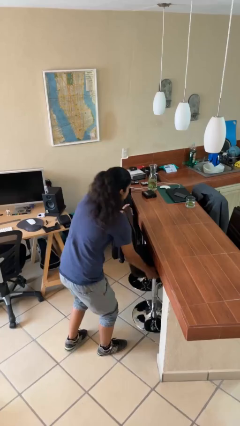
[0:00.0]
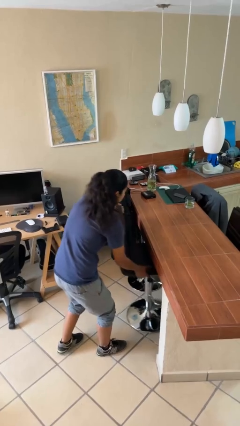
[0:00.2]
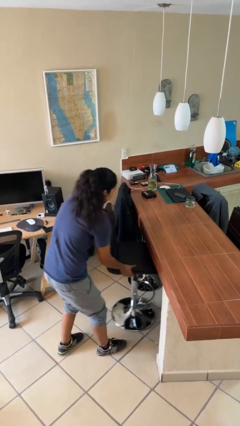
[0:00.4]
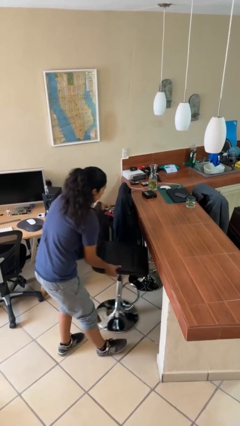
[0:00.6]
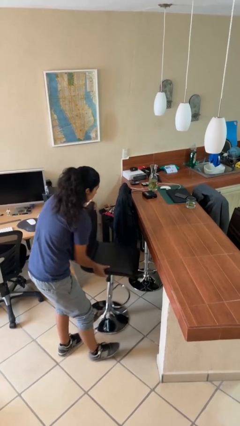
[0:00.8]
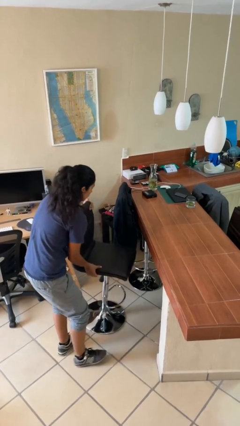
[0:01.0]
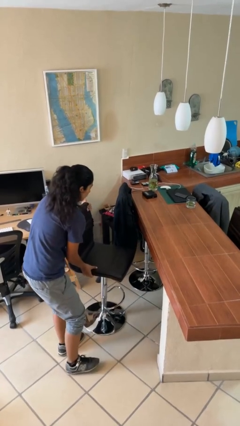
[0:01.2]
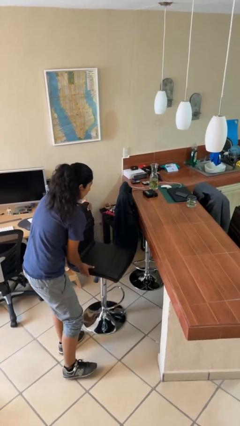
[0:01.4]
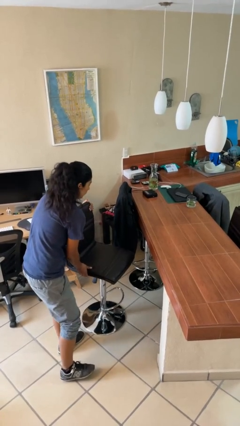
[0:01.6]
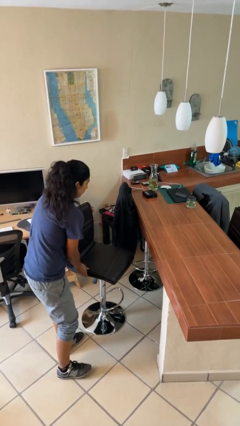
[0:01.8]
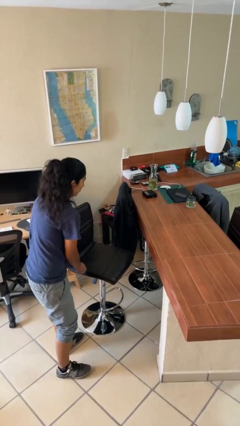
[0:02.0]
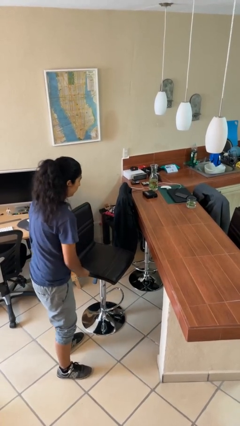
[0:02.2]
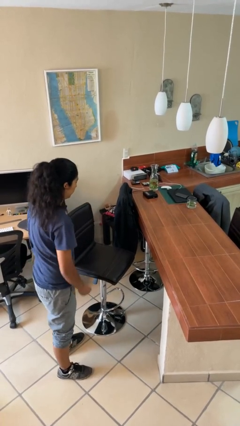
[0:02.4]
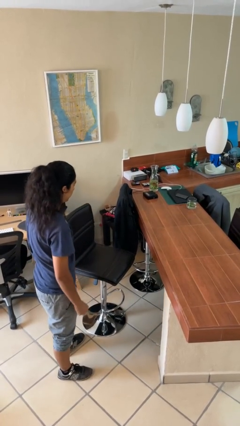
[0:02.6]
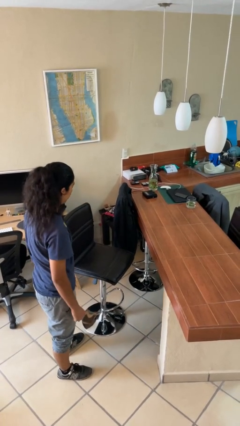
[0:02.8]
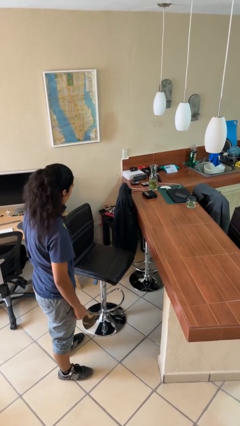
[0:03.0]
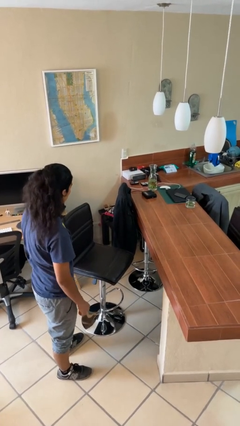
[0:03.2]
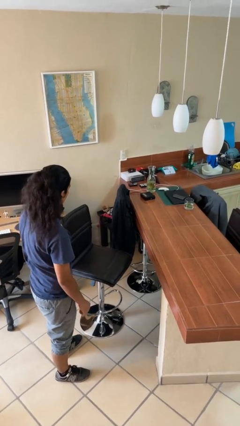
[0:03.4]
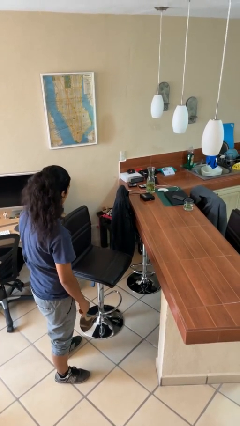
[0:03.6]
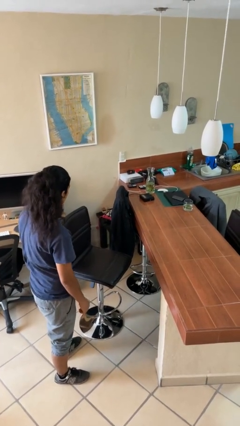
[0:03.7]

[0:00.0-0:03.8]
person pulls out chair

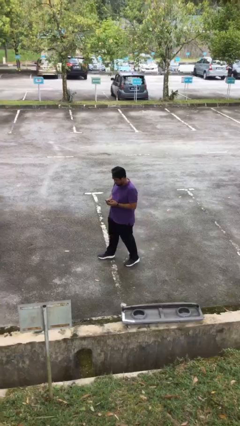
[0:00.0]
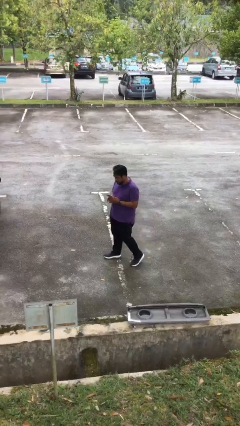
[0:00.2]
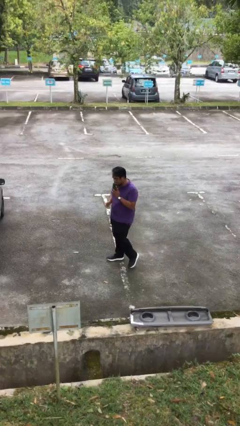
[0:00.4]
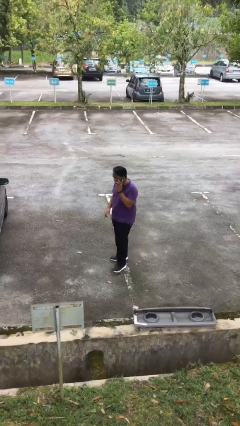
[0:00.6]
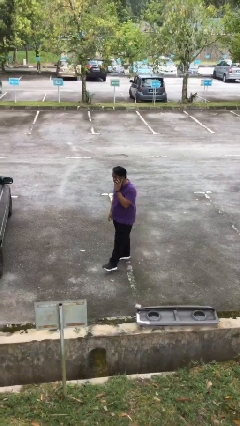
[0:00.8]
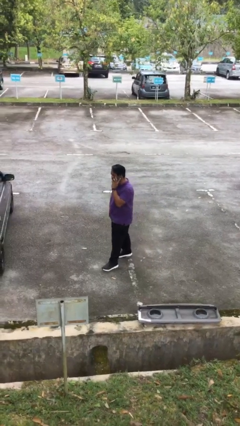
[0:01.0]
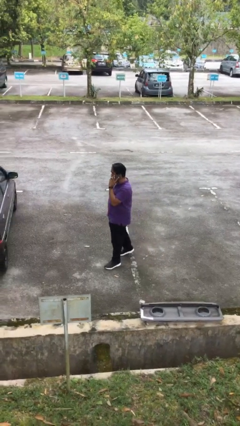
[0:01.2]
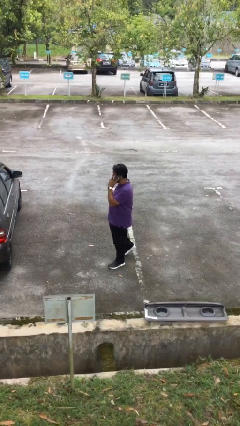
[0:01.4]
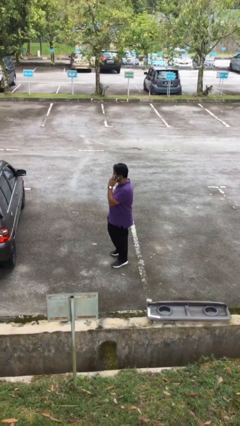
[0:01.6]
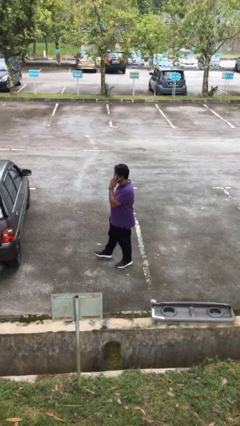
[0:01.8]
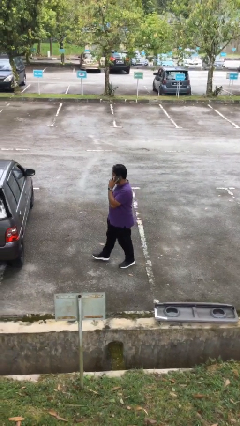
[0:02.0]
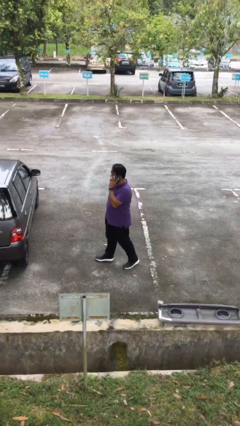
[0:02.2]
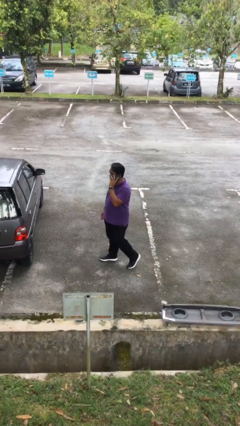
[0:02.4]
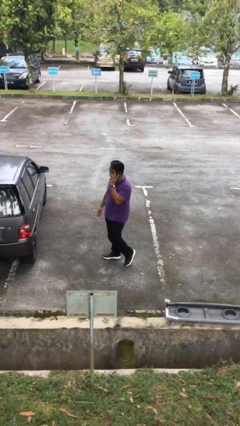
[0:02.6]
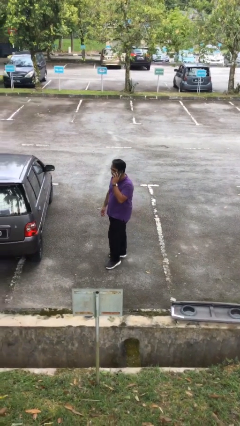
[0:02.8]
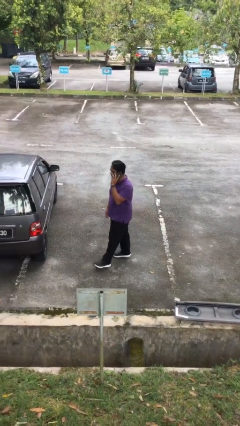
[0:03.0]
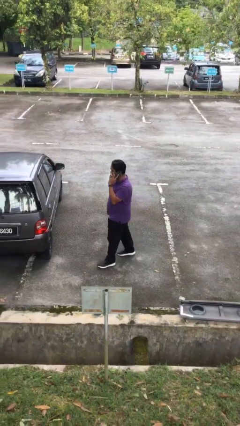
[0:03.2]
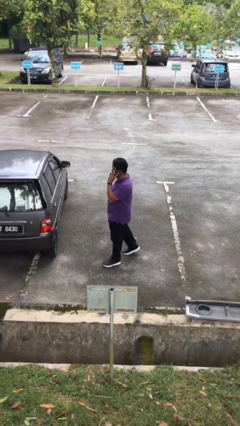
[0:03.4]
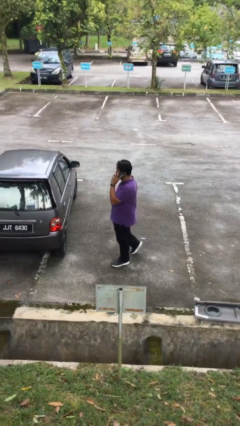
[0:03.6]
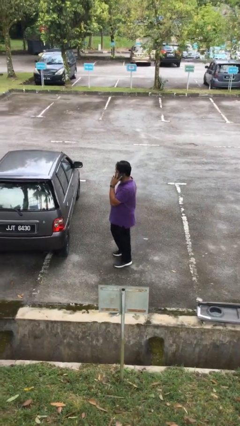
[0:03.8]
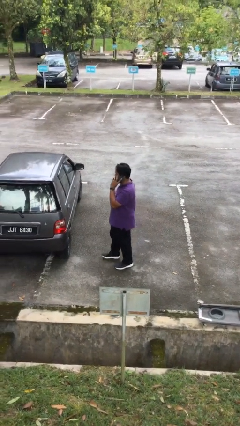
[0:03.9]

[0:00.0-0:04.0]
person talks on phone

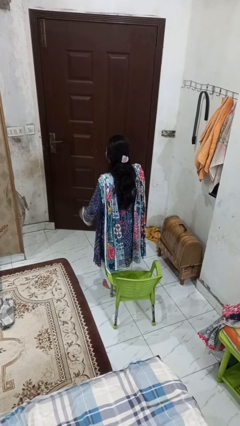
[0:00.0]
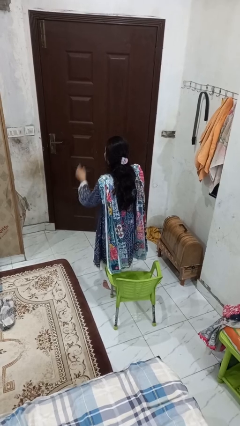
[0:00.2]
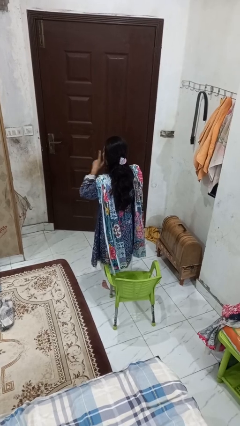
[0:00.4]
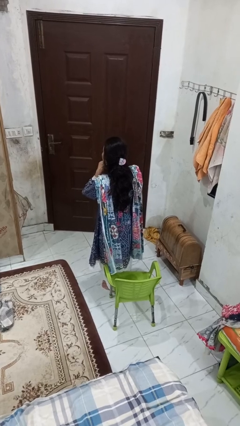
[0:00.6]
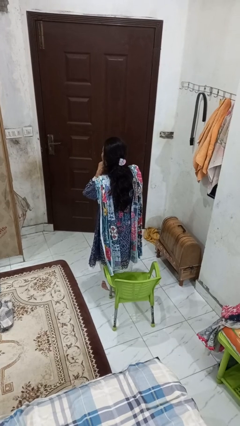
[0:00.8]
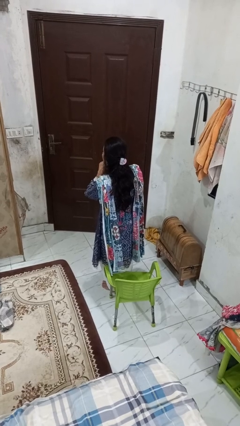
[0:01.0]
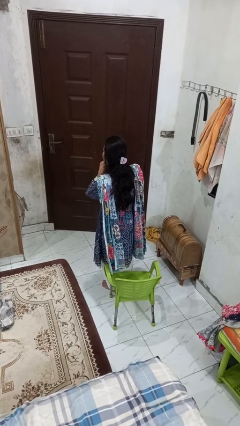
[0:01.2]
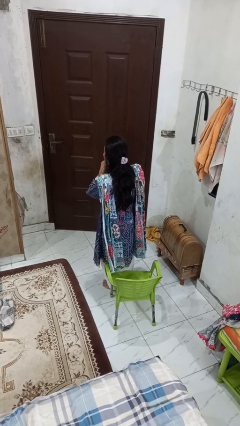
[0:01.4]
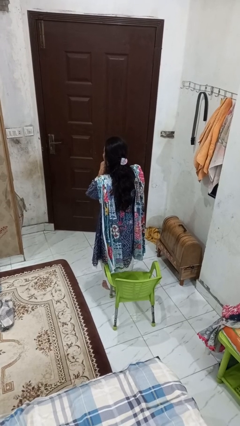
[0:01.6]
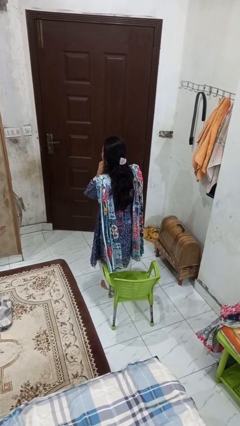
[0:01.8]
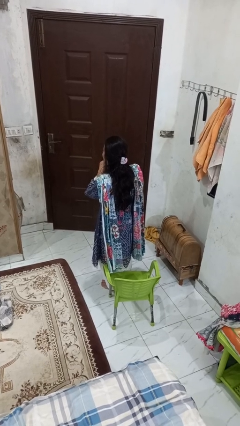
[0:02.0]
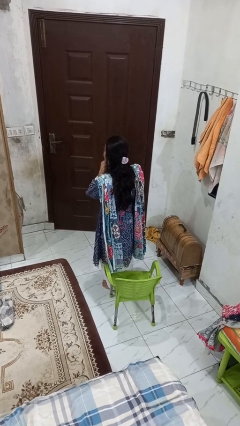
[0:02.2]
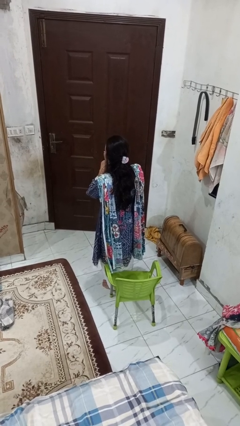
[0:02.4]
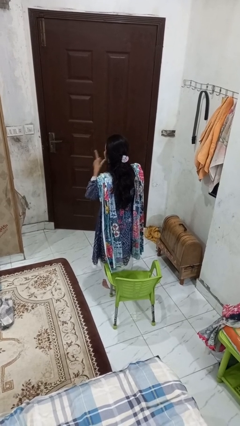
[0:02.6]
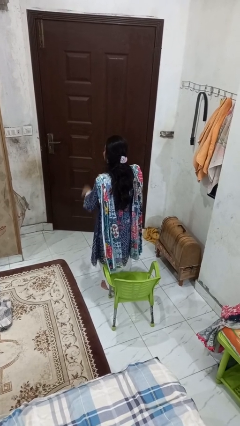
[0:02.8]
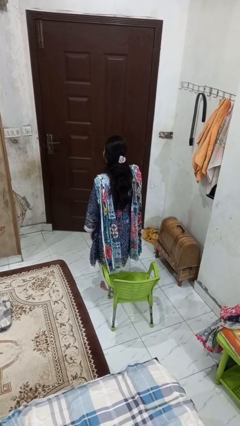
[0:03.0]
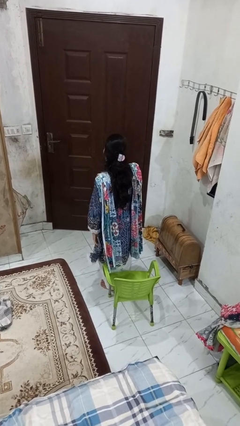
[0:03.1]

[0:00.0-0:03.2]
person gestures be quiet

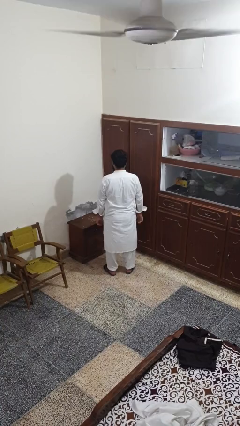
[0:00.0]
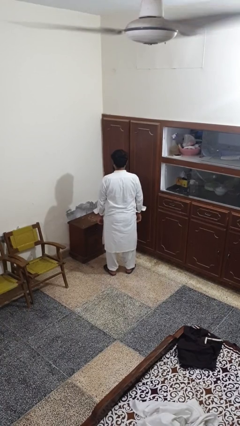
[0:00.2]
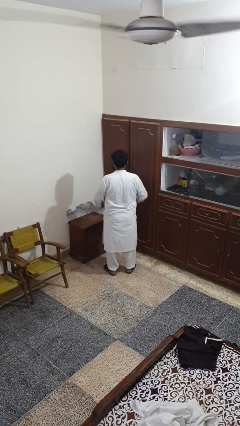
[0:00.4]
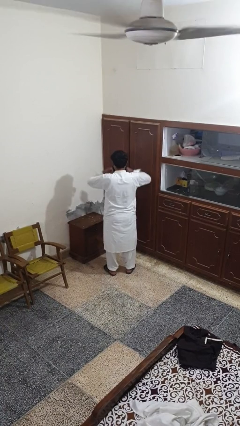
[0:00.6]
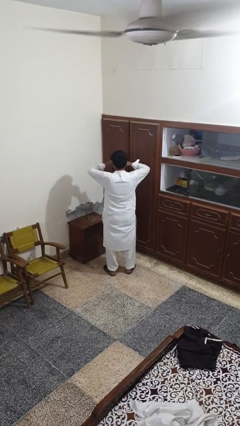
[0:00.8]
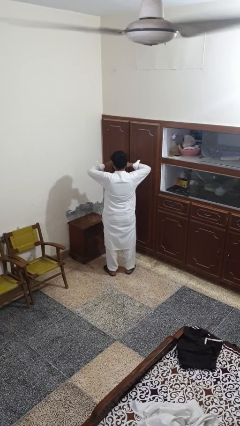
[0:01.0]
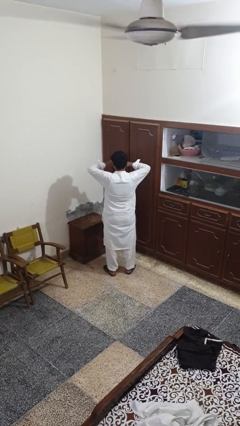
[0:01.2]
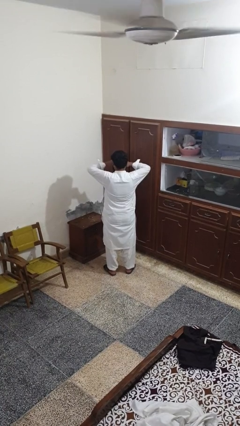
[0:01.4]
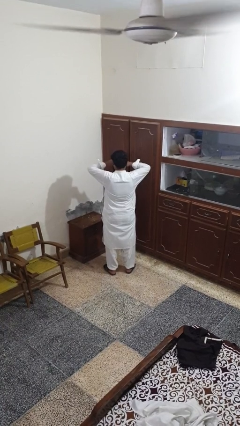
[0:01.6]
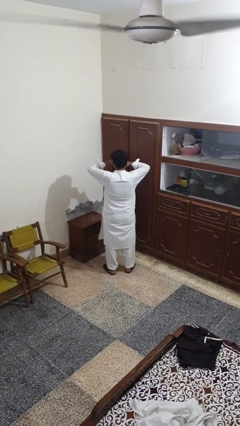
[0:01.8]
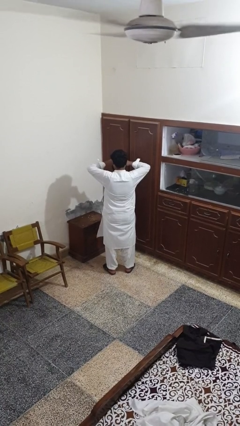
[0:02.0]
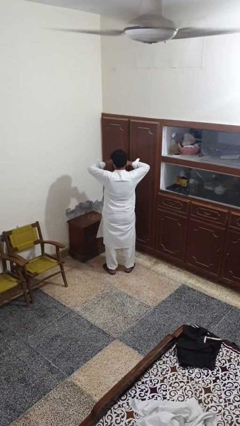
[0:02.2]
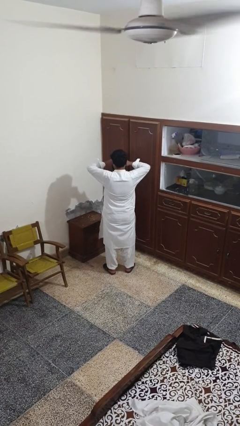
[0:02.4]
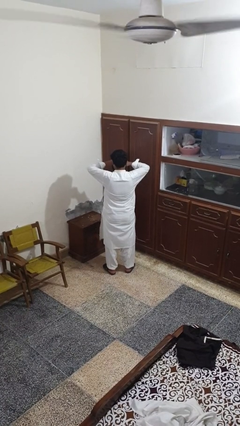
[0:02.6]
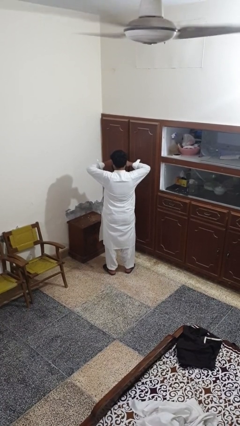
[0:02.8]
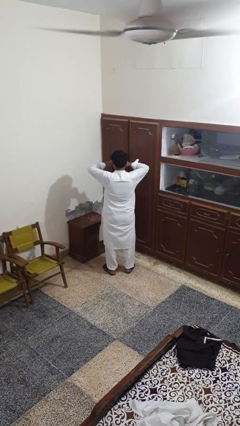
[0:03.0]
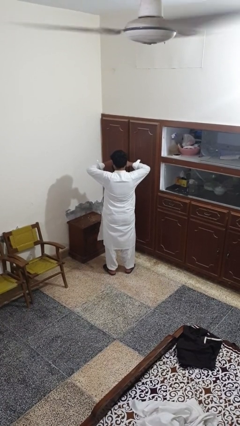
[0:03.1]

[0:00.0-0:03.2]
person rubs eyes

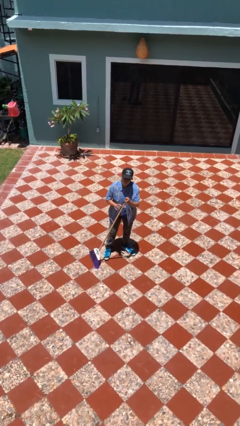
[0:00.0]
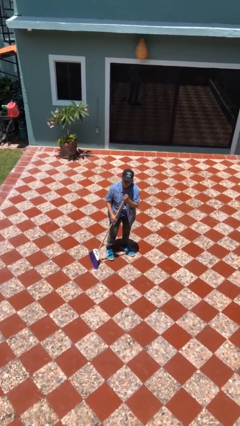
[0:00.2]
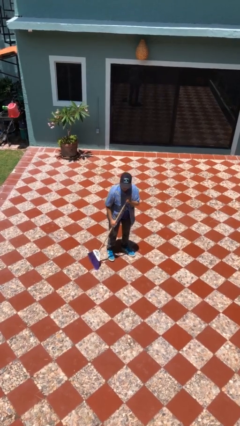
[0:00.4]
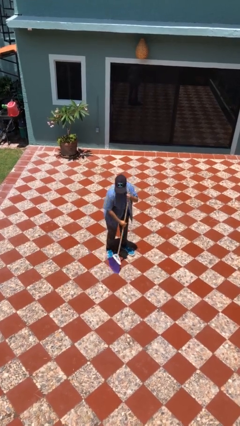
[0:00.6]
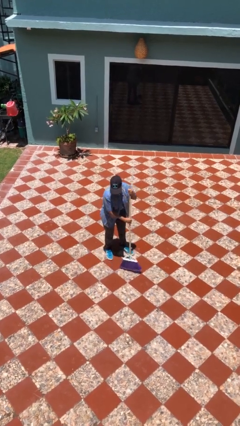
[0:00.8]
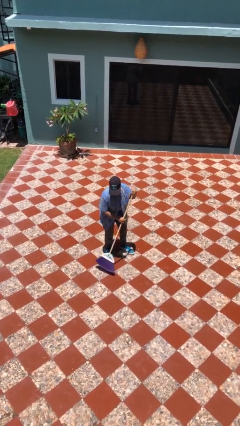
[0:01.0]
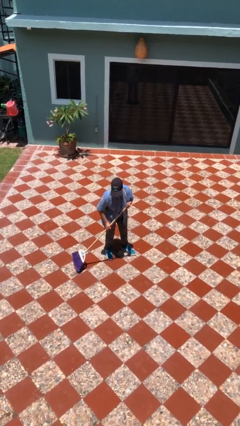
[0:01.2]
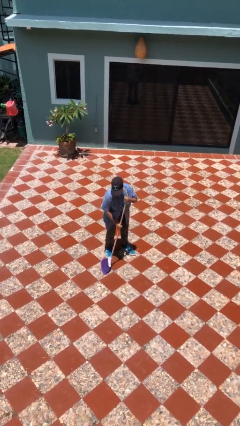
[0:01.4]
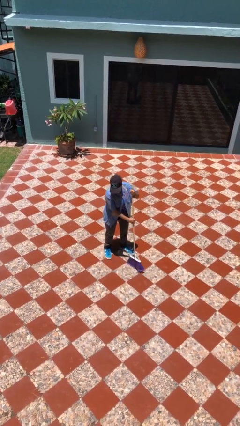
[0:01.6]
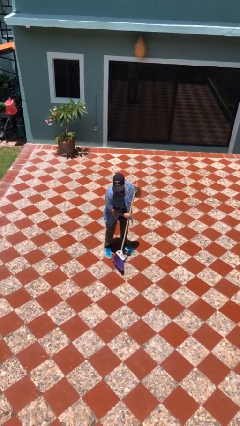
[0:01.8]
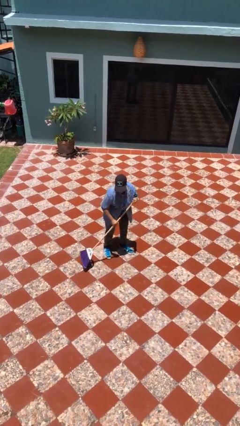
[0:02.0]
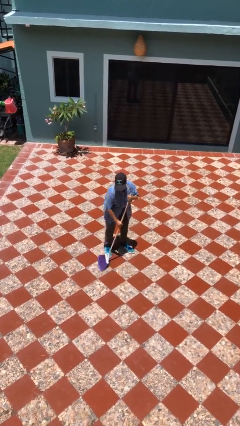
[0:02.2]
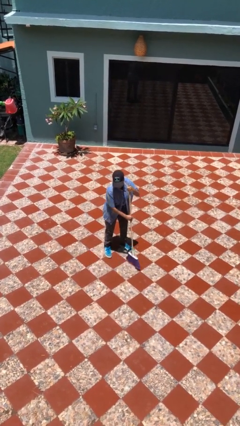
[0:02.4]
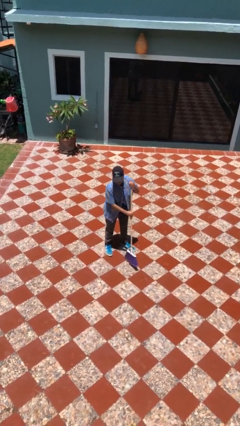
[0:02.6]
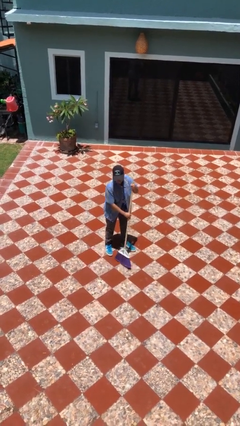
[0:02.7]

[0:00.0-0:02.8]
person sweeps floor

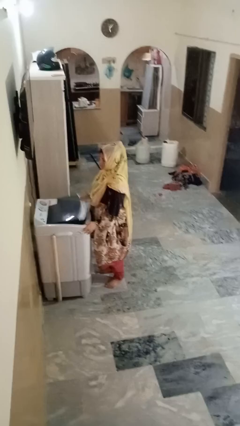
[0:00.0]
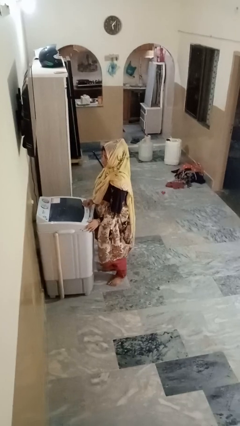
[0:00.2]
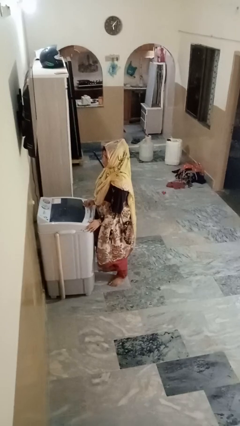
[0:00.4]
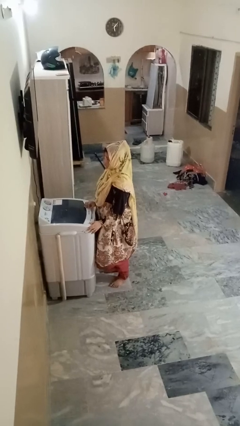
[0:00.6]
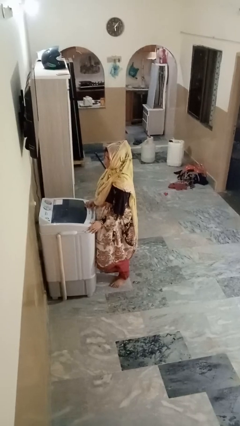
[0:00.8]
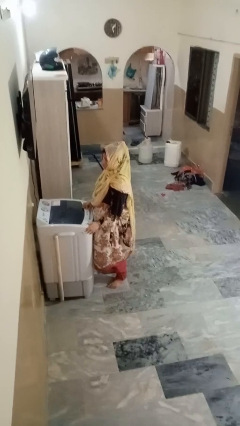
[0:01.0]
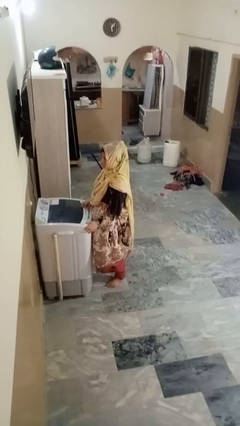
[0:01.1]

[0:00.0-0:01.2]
person closes clothes washer
